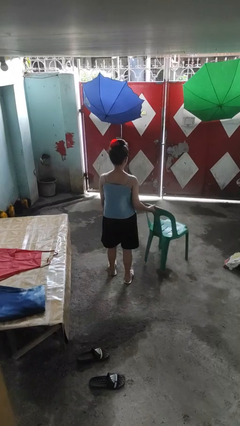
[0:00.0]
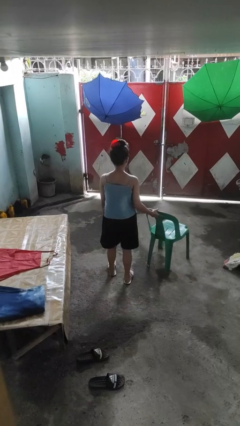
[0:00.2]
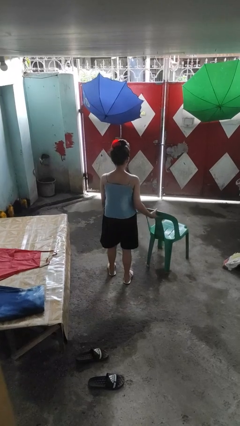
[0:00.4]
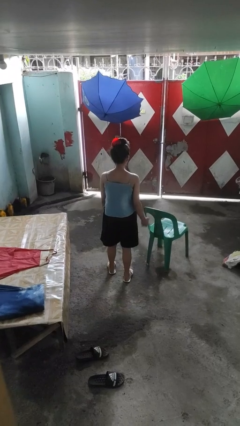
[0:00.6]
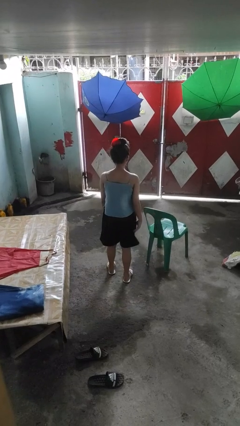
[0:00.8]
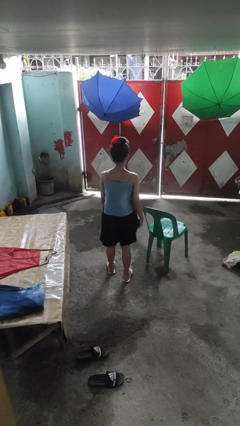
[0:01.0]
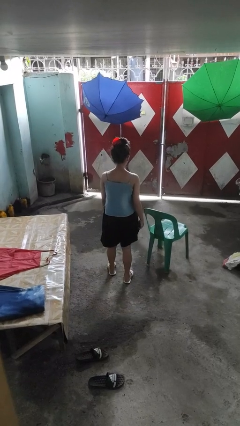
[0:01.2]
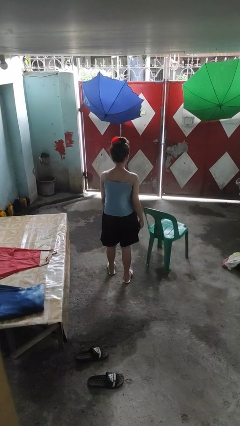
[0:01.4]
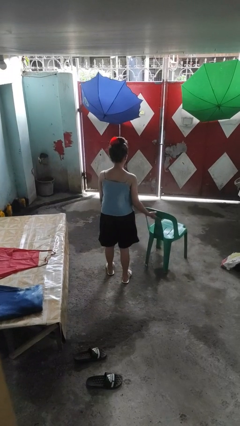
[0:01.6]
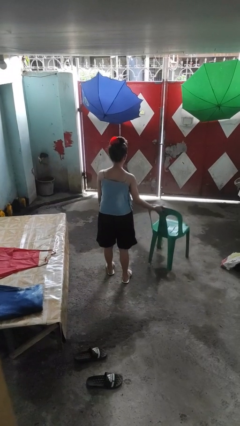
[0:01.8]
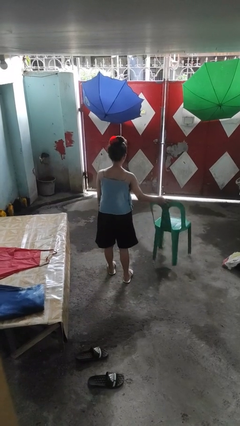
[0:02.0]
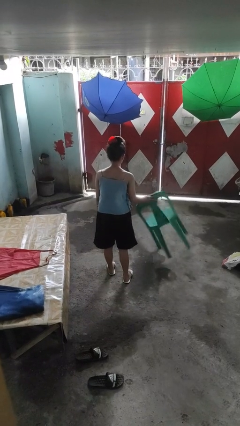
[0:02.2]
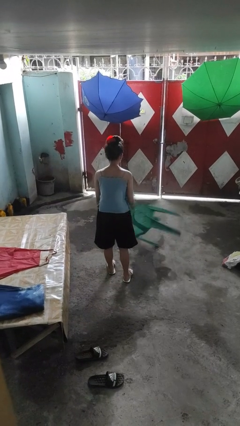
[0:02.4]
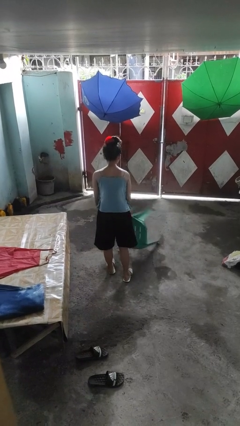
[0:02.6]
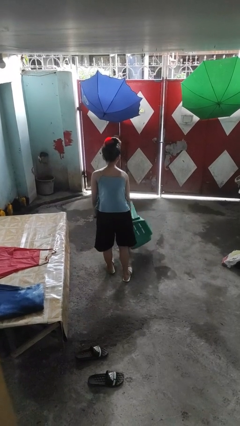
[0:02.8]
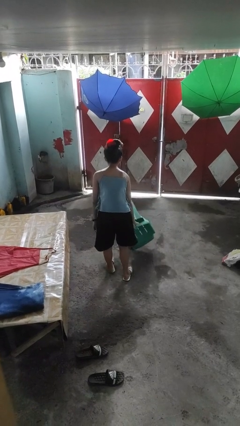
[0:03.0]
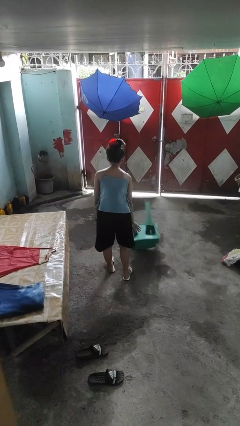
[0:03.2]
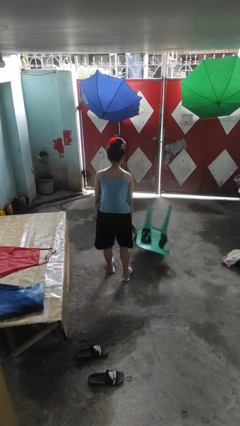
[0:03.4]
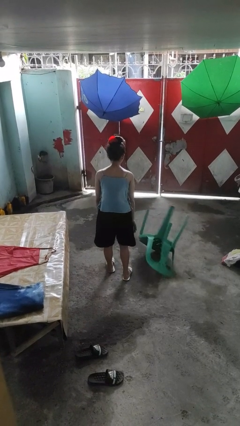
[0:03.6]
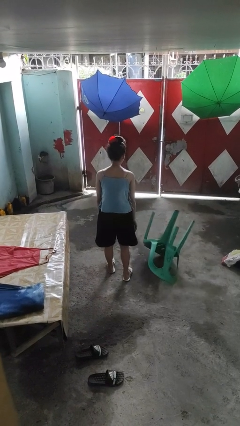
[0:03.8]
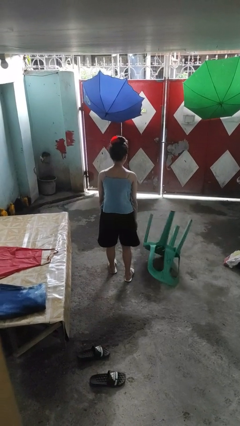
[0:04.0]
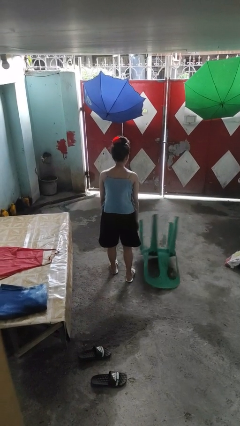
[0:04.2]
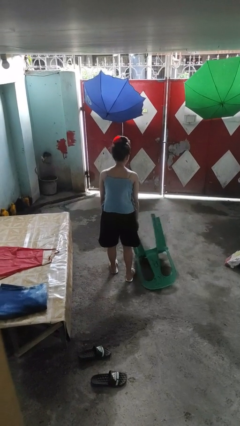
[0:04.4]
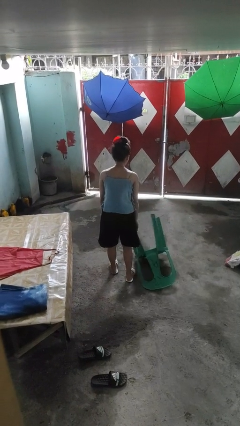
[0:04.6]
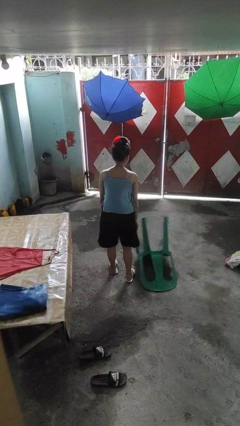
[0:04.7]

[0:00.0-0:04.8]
person knocks over furniture

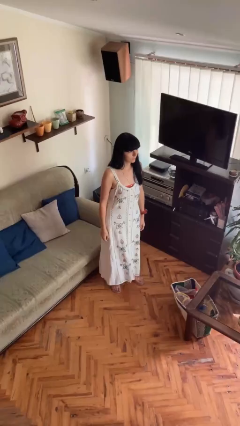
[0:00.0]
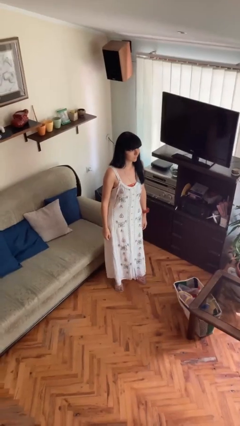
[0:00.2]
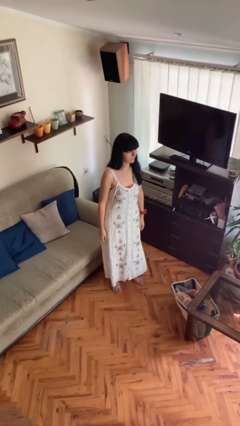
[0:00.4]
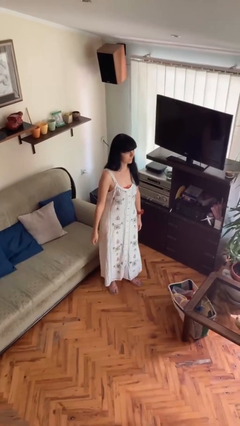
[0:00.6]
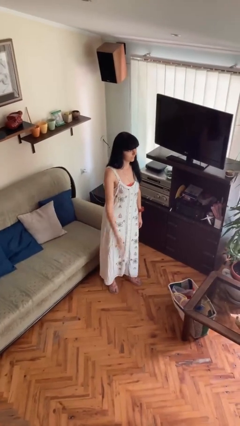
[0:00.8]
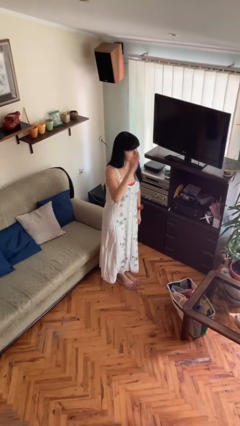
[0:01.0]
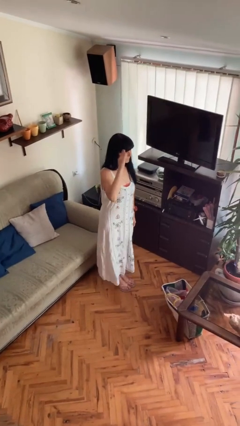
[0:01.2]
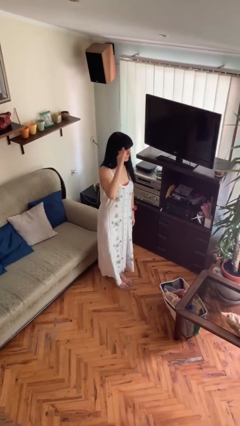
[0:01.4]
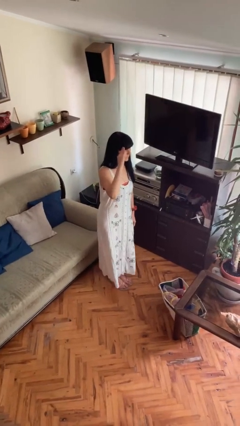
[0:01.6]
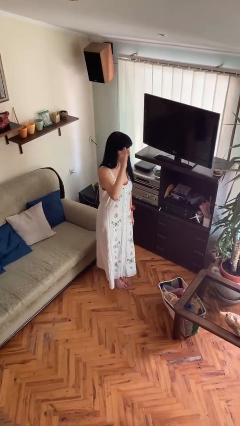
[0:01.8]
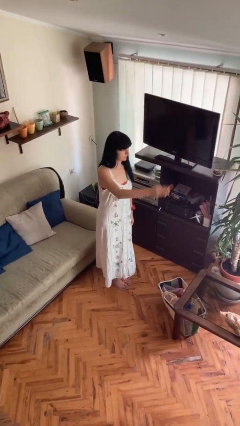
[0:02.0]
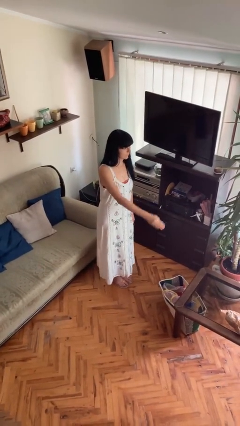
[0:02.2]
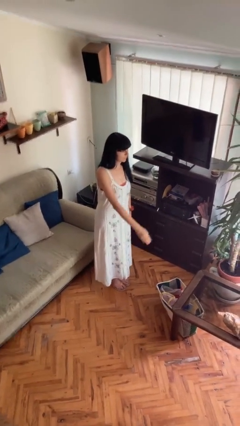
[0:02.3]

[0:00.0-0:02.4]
person salutes

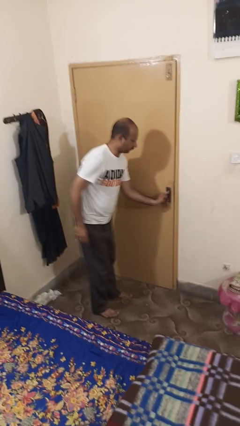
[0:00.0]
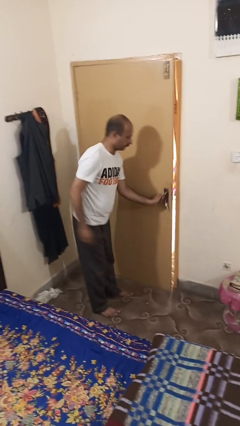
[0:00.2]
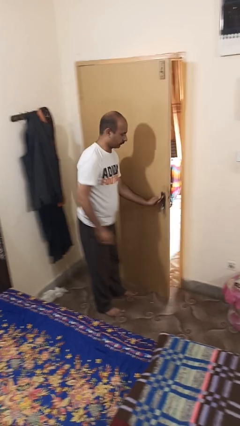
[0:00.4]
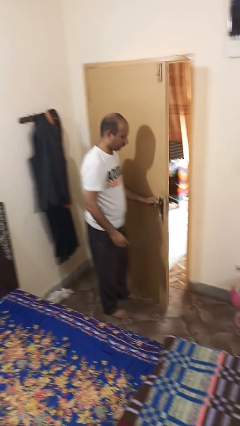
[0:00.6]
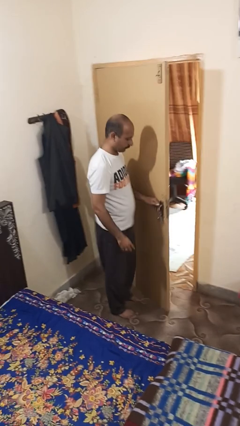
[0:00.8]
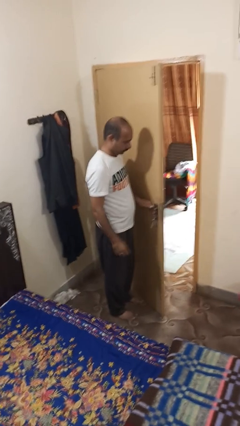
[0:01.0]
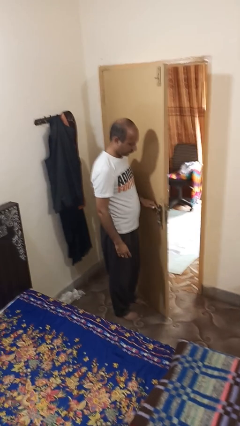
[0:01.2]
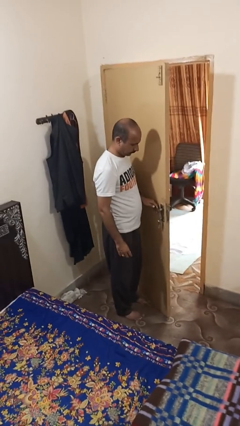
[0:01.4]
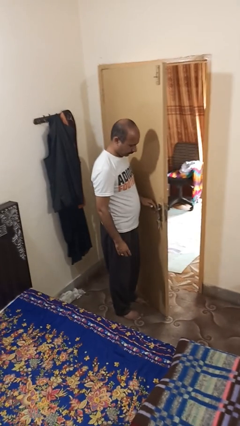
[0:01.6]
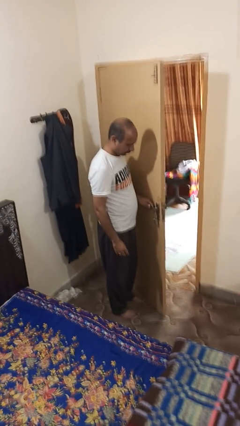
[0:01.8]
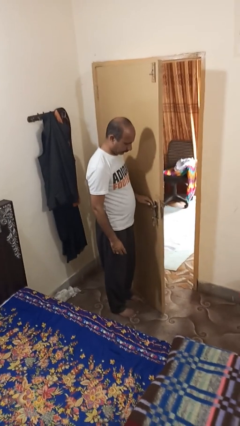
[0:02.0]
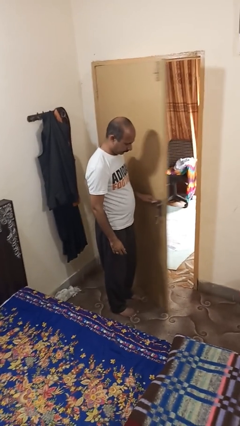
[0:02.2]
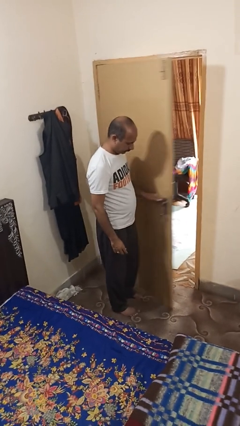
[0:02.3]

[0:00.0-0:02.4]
person opens facility door

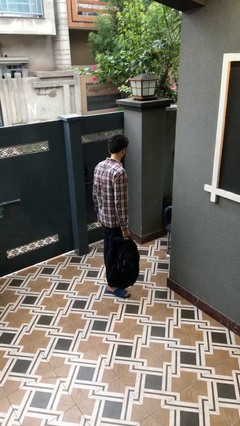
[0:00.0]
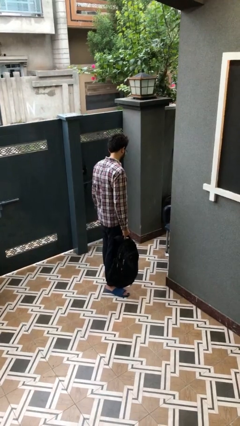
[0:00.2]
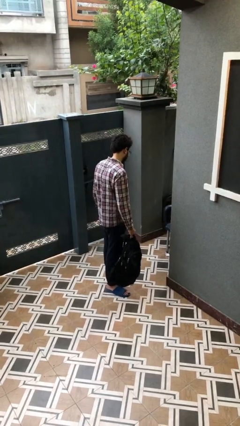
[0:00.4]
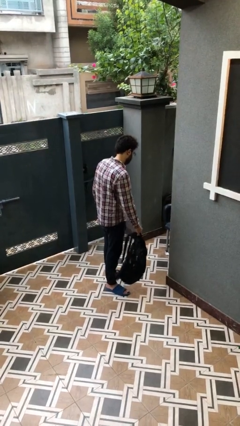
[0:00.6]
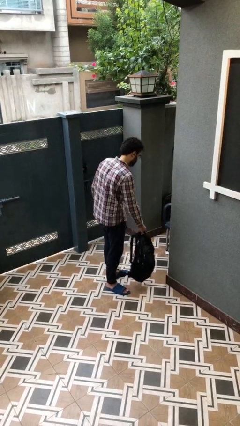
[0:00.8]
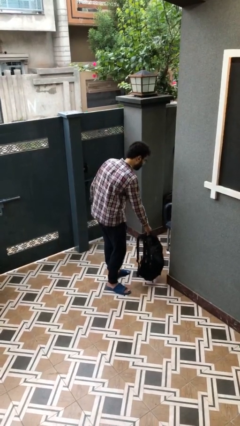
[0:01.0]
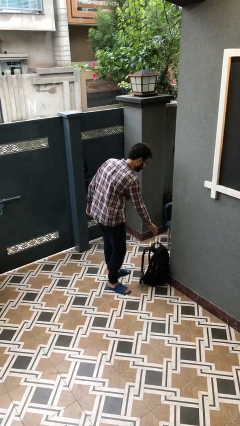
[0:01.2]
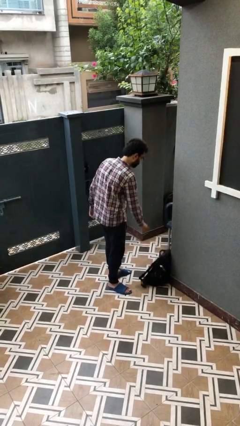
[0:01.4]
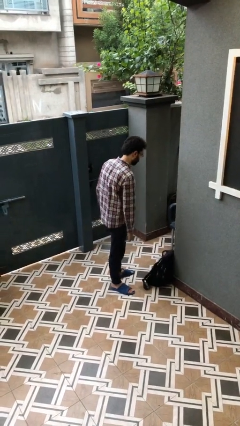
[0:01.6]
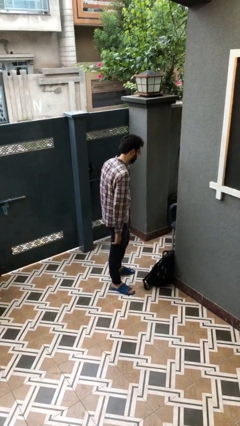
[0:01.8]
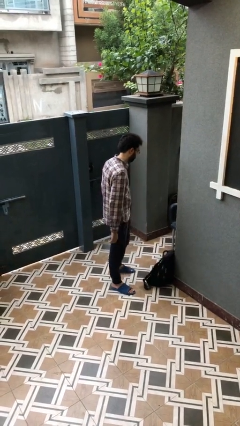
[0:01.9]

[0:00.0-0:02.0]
person puts down object on floor

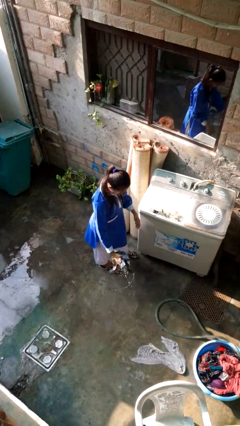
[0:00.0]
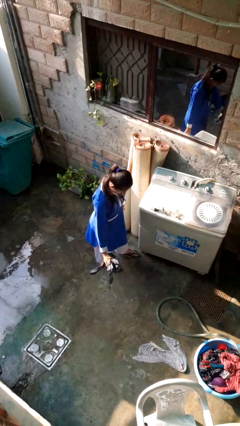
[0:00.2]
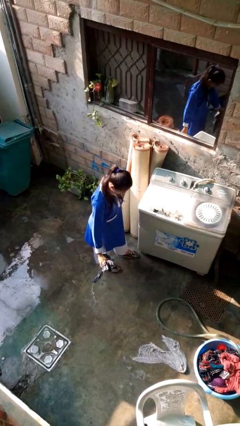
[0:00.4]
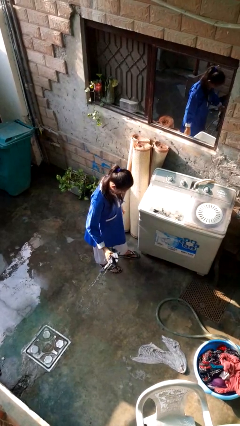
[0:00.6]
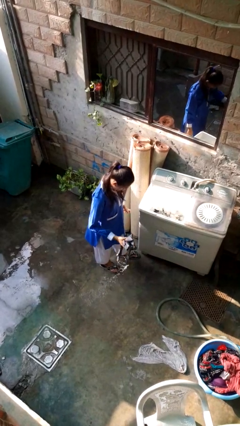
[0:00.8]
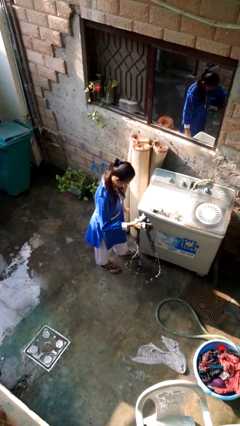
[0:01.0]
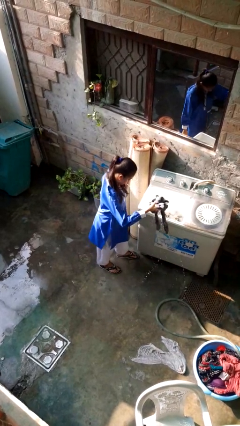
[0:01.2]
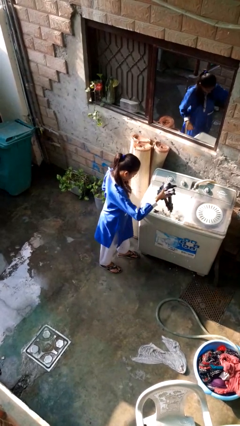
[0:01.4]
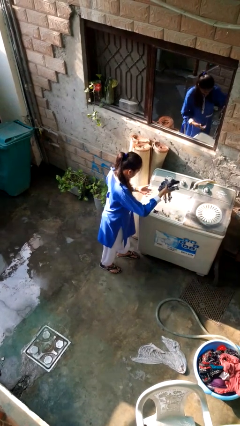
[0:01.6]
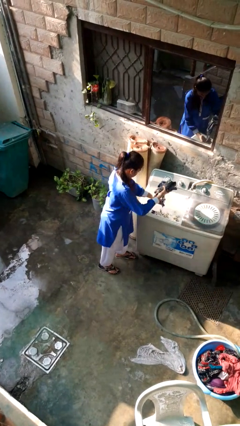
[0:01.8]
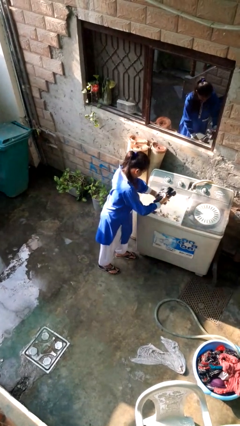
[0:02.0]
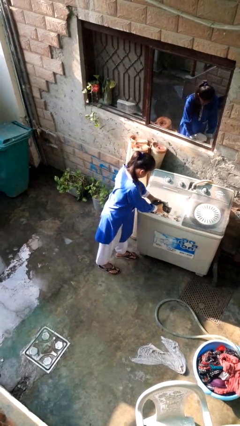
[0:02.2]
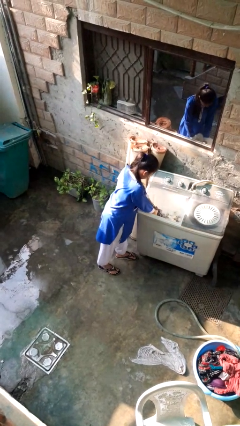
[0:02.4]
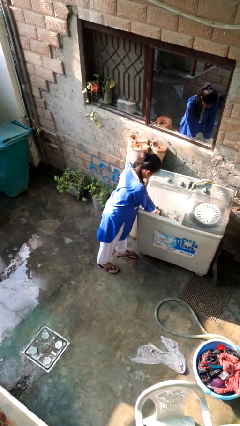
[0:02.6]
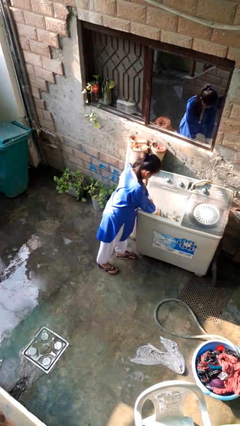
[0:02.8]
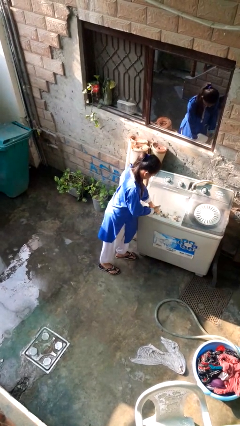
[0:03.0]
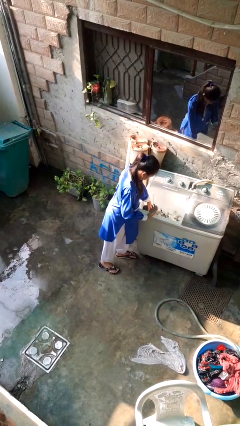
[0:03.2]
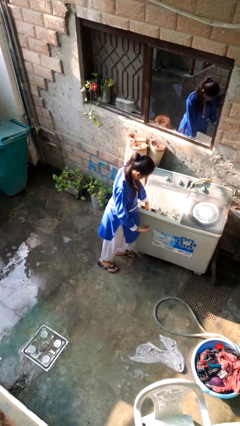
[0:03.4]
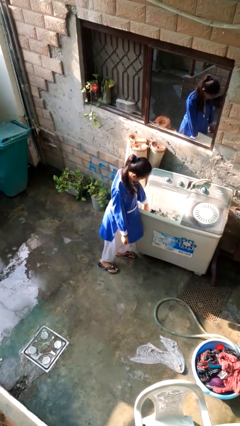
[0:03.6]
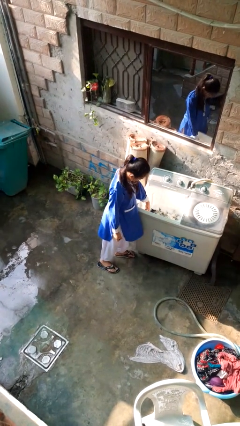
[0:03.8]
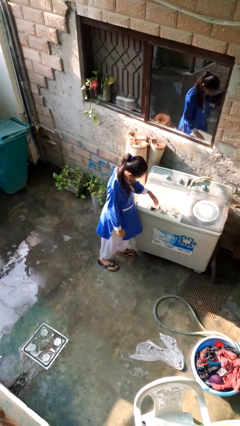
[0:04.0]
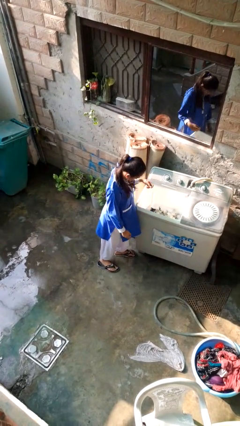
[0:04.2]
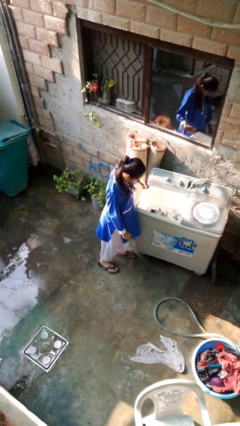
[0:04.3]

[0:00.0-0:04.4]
person loads clotheswasher

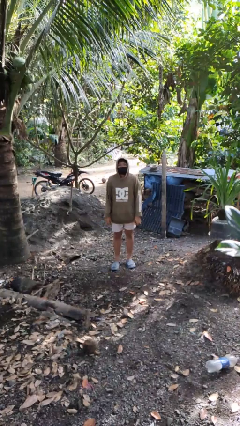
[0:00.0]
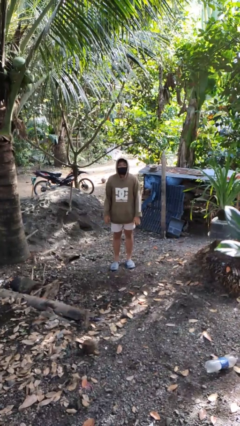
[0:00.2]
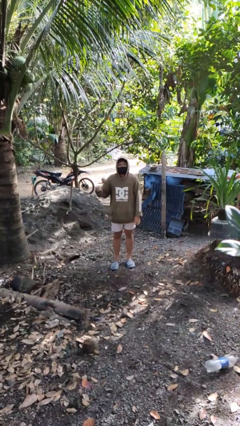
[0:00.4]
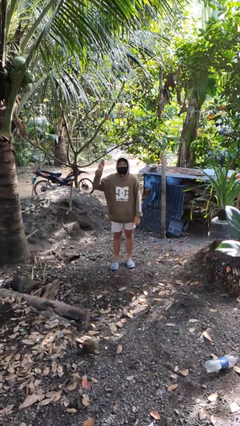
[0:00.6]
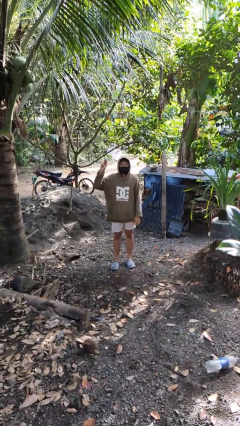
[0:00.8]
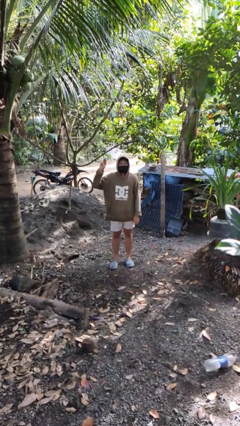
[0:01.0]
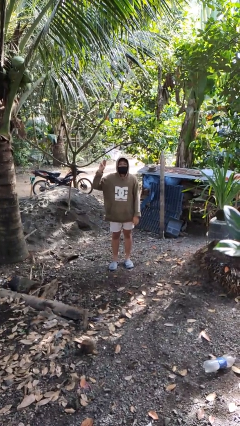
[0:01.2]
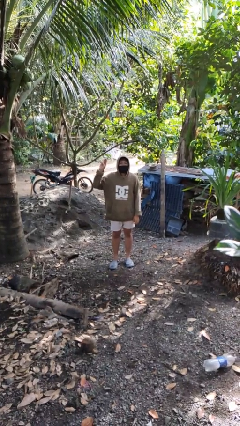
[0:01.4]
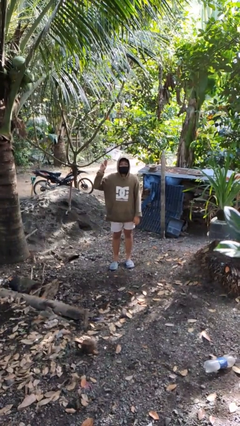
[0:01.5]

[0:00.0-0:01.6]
person gestures number three
